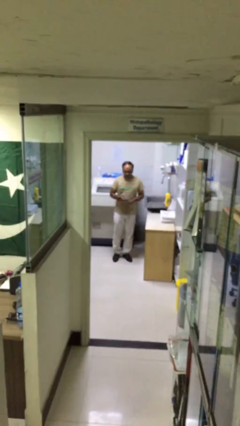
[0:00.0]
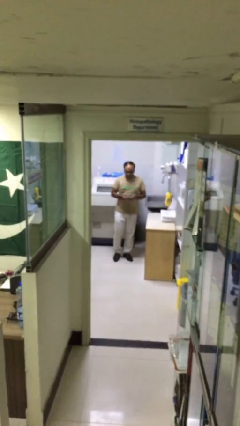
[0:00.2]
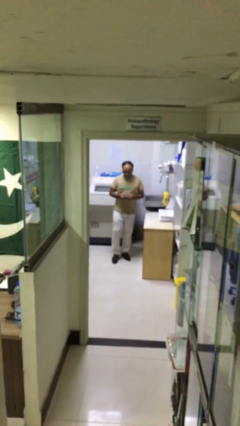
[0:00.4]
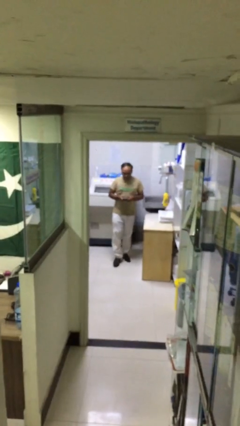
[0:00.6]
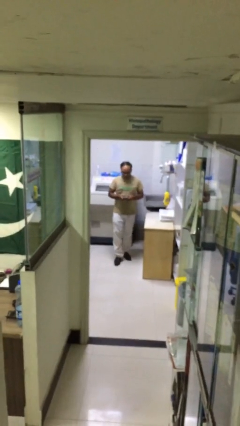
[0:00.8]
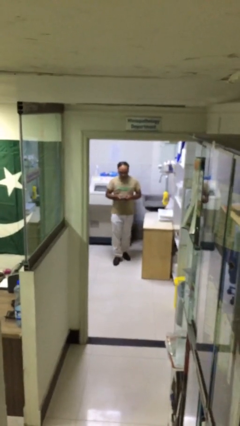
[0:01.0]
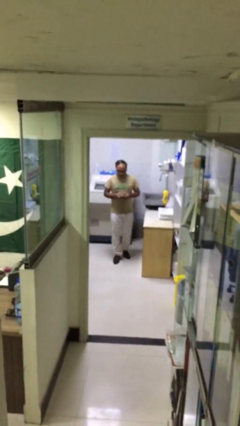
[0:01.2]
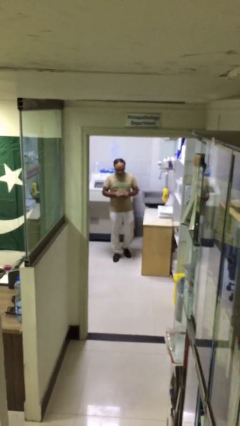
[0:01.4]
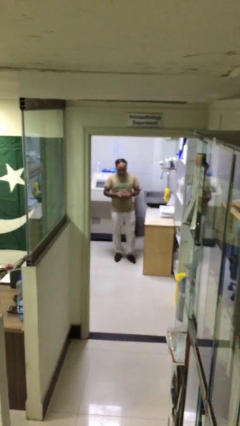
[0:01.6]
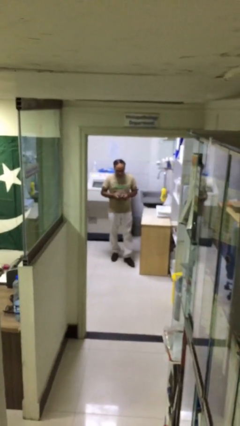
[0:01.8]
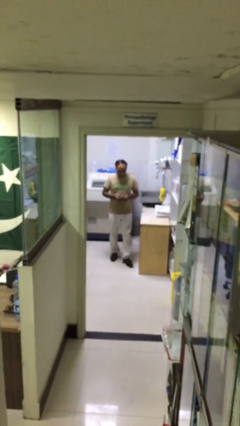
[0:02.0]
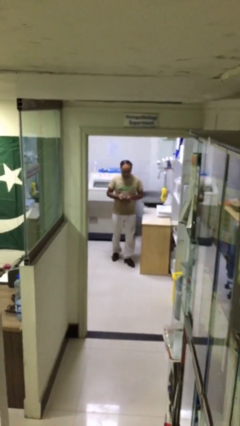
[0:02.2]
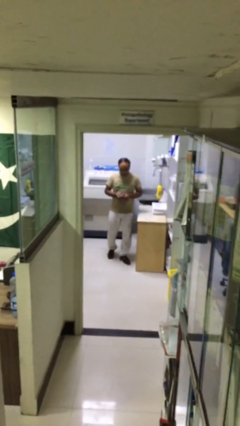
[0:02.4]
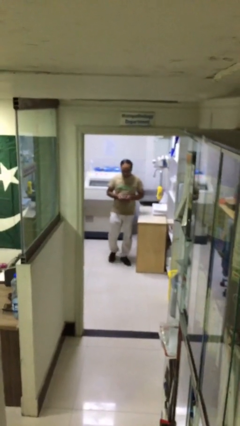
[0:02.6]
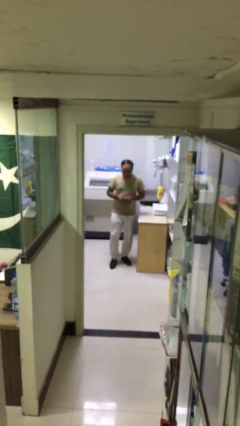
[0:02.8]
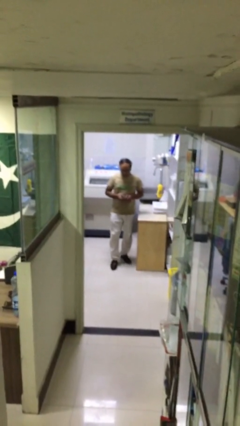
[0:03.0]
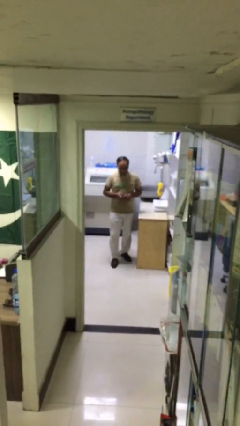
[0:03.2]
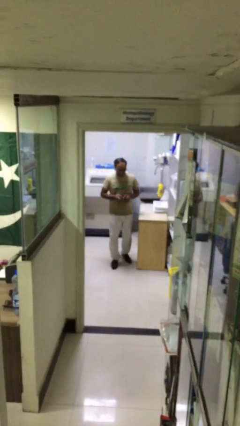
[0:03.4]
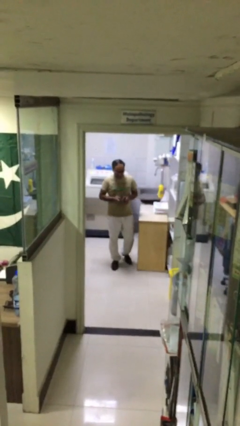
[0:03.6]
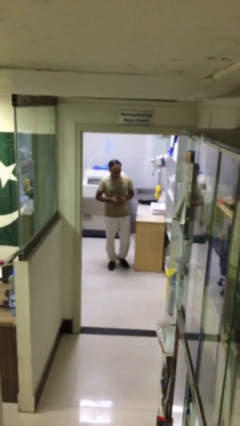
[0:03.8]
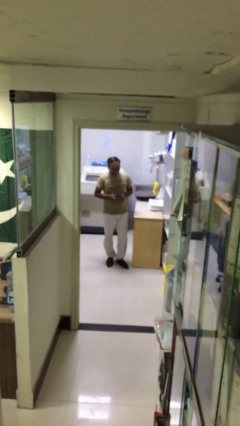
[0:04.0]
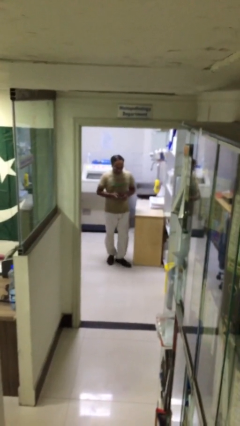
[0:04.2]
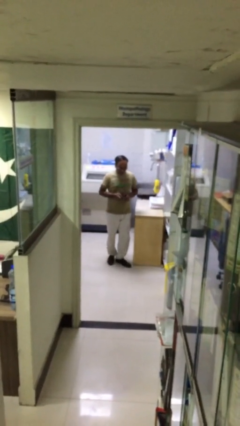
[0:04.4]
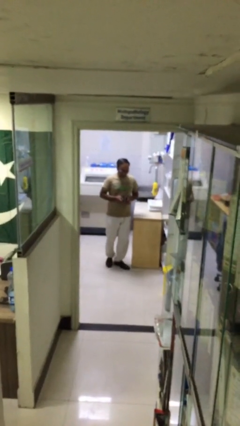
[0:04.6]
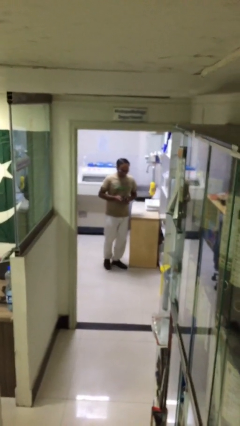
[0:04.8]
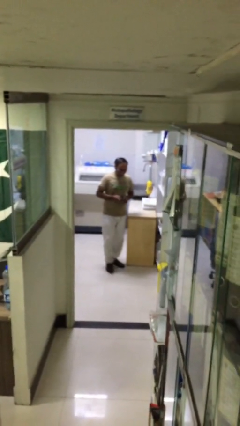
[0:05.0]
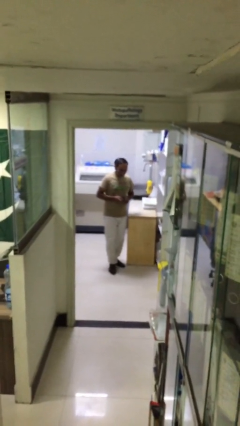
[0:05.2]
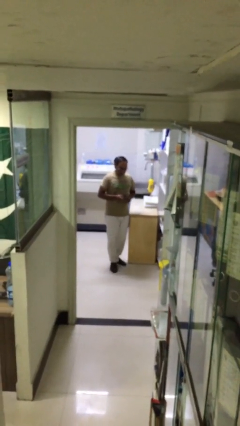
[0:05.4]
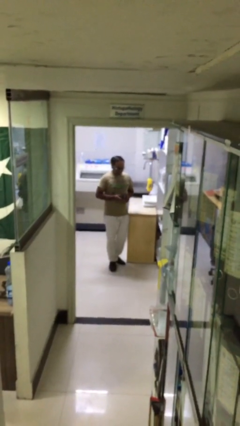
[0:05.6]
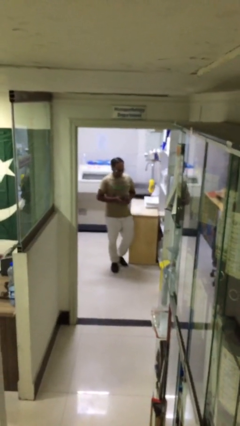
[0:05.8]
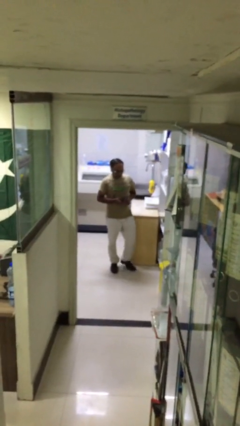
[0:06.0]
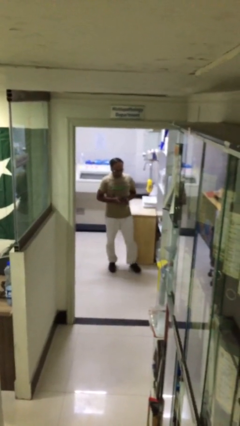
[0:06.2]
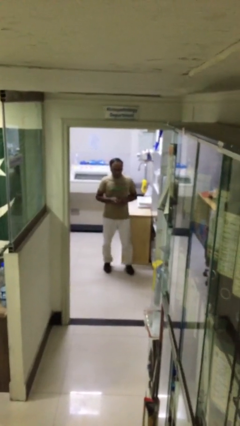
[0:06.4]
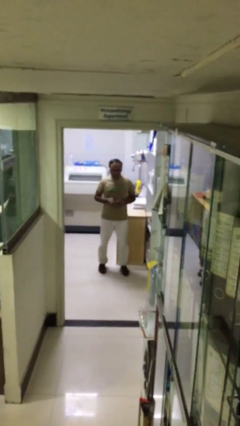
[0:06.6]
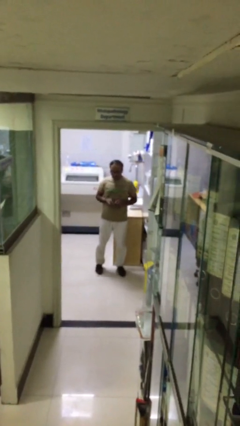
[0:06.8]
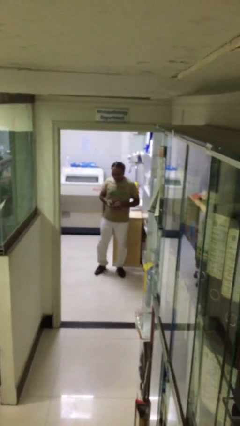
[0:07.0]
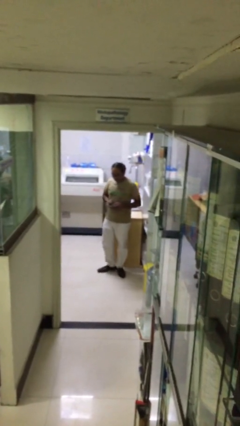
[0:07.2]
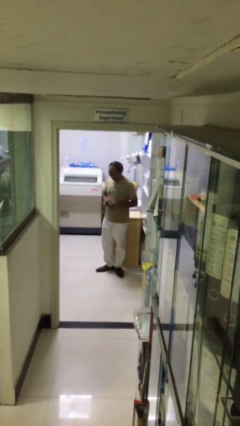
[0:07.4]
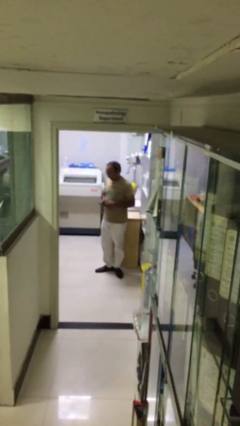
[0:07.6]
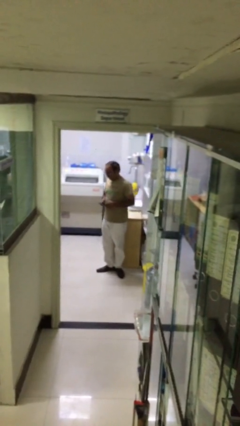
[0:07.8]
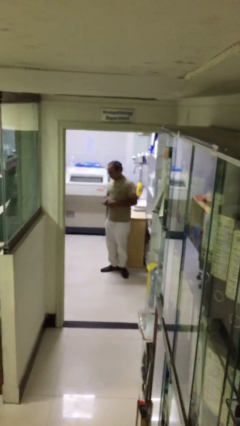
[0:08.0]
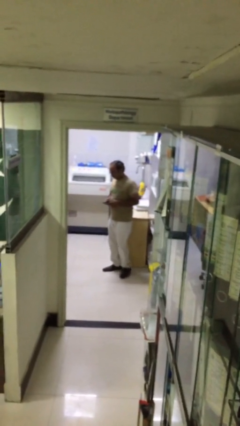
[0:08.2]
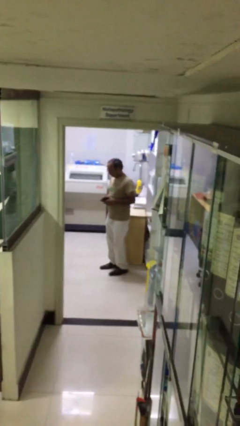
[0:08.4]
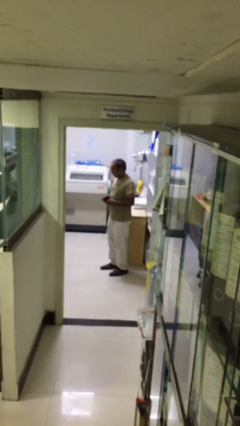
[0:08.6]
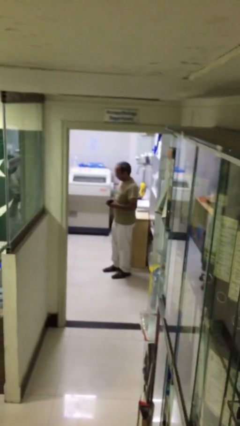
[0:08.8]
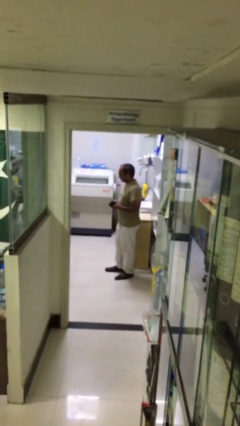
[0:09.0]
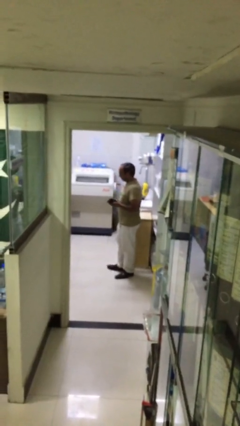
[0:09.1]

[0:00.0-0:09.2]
person texts on phone

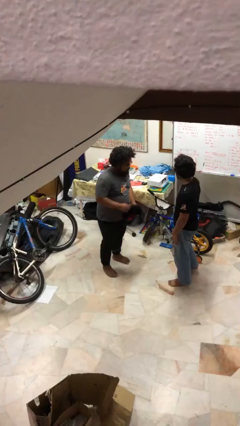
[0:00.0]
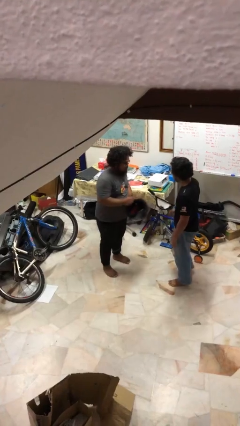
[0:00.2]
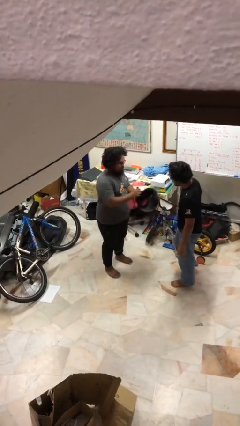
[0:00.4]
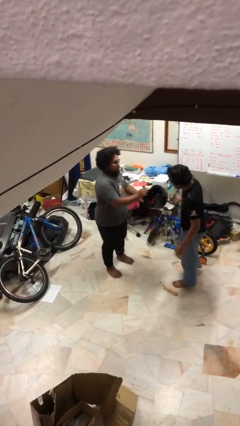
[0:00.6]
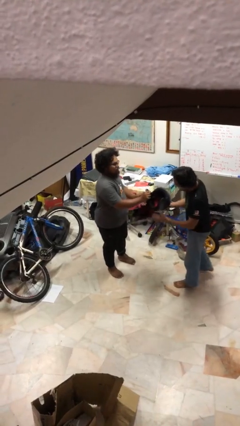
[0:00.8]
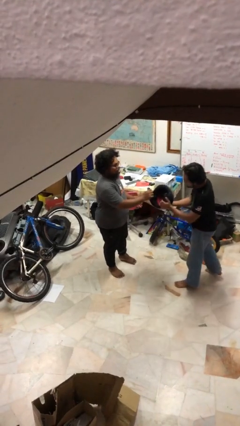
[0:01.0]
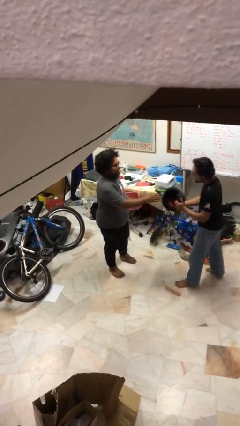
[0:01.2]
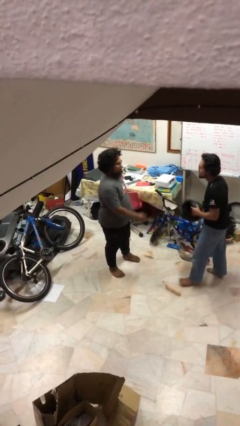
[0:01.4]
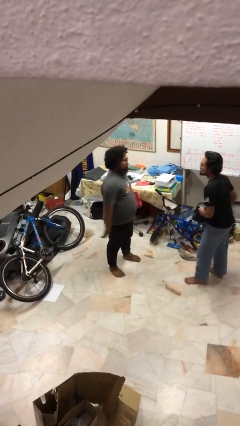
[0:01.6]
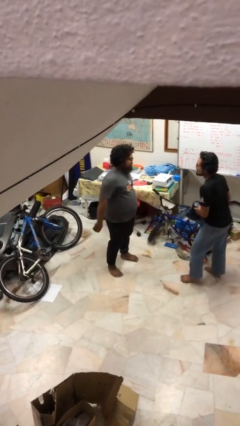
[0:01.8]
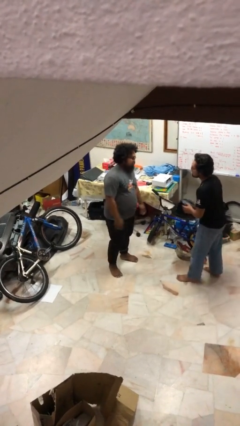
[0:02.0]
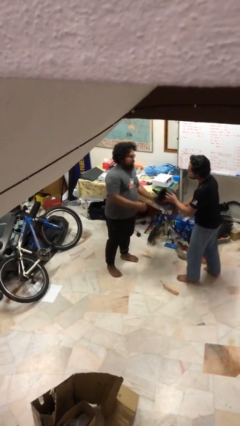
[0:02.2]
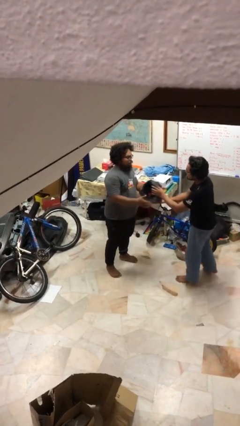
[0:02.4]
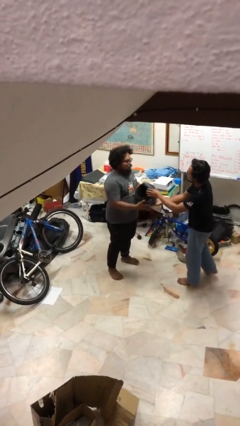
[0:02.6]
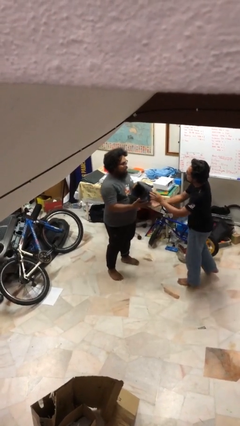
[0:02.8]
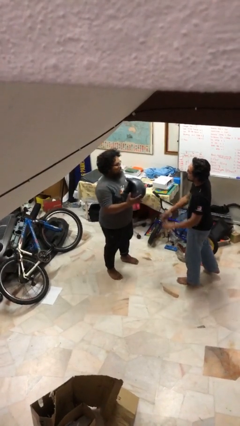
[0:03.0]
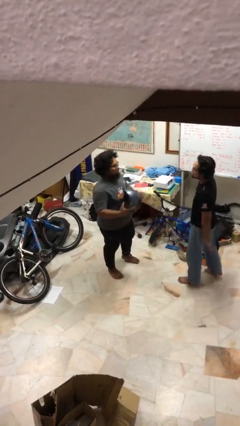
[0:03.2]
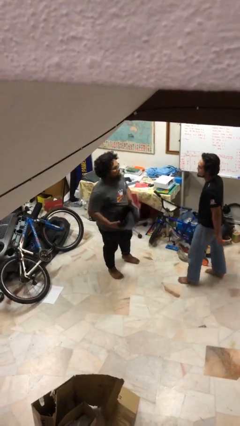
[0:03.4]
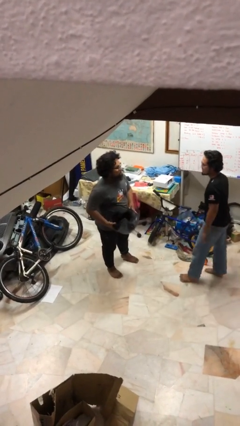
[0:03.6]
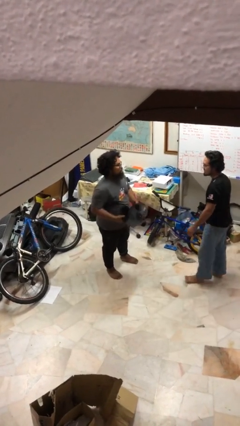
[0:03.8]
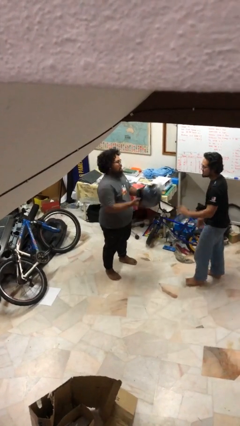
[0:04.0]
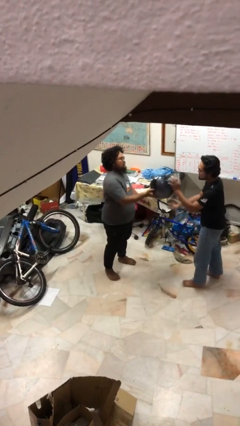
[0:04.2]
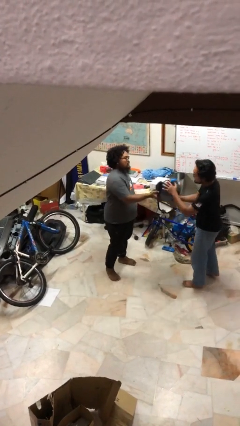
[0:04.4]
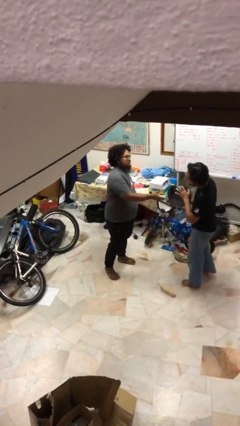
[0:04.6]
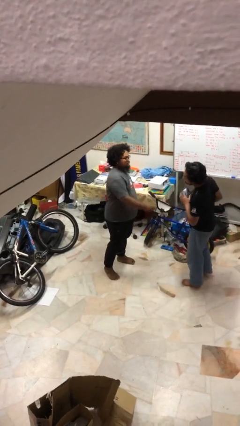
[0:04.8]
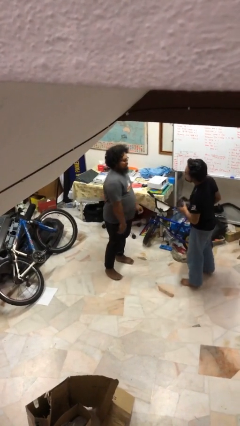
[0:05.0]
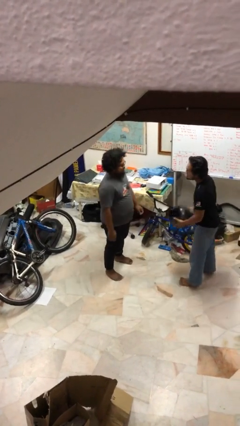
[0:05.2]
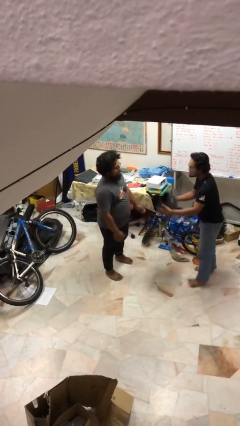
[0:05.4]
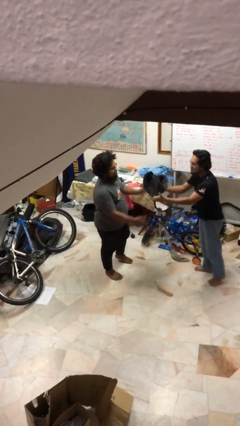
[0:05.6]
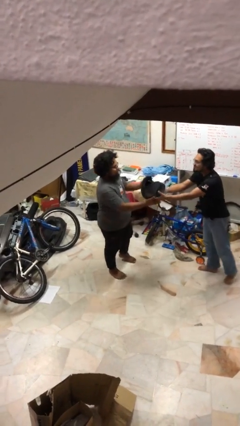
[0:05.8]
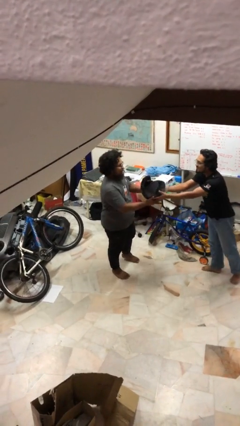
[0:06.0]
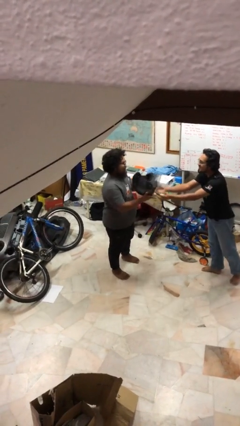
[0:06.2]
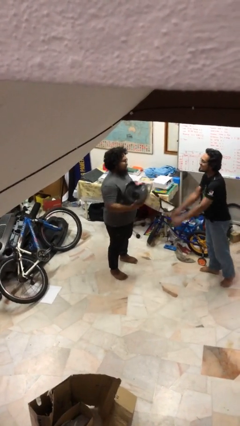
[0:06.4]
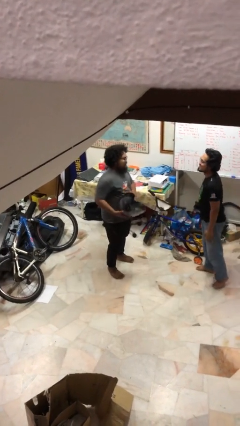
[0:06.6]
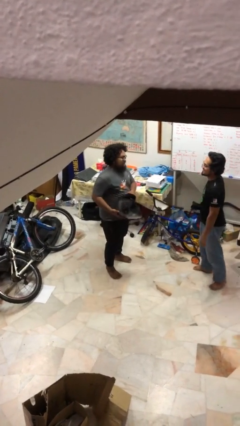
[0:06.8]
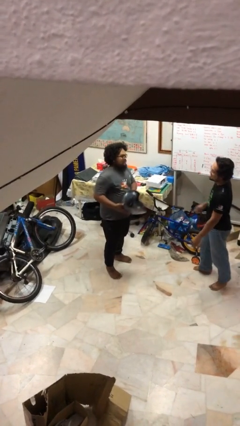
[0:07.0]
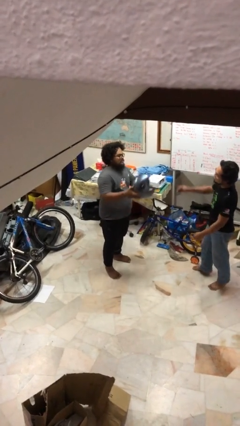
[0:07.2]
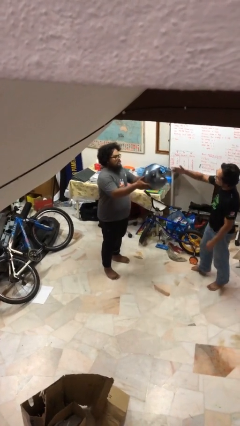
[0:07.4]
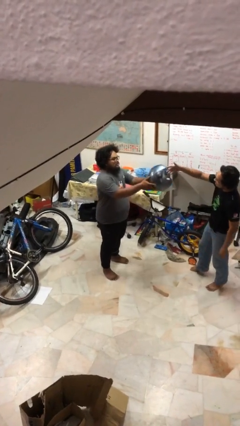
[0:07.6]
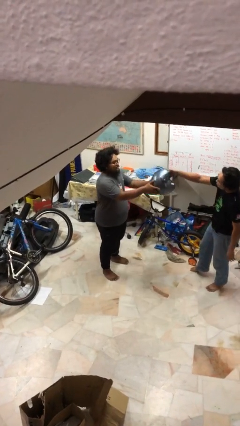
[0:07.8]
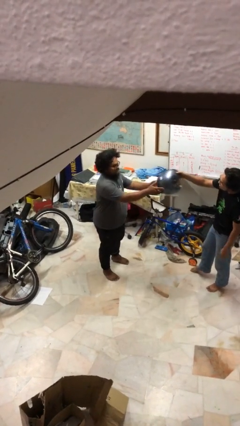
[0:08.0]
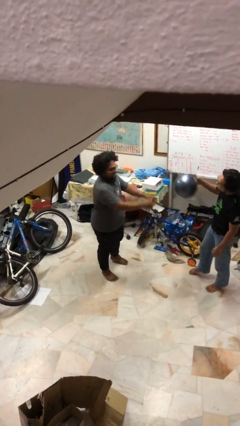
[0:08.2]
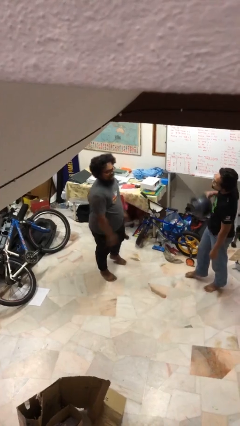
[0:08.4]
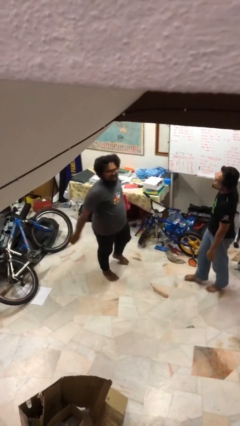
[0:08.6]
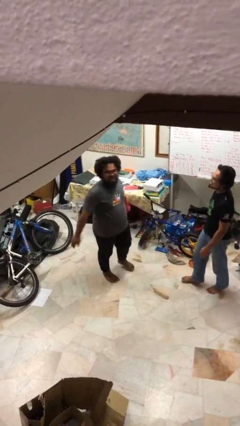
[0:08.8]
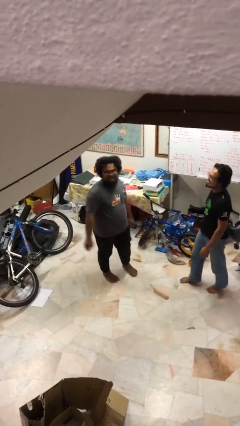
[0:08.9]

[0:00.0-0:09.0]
person transfers object to person
